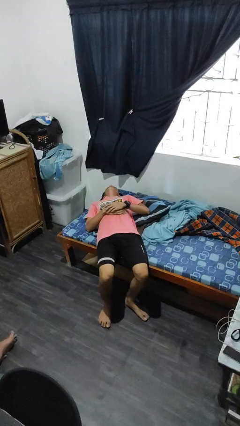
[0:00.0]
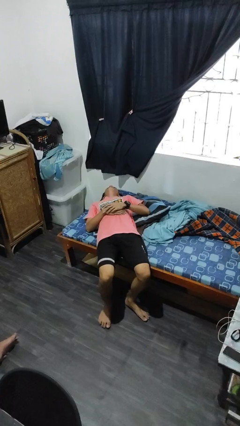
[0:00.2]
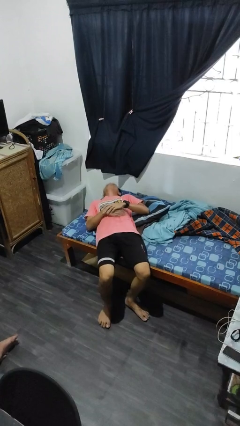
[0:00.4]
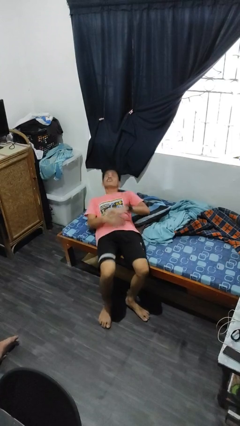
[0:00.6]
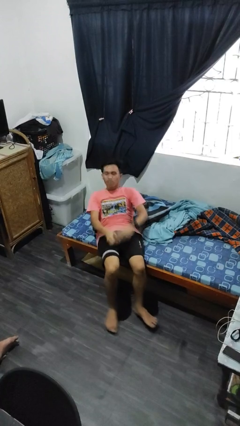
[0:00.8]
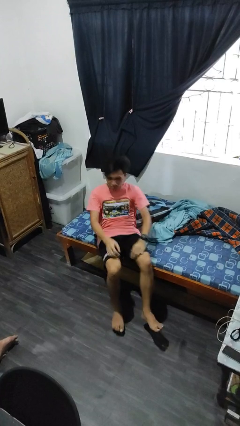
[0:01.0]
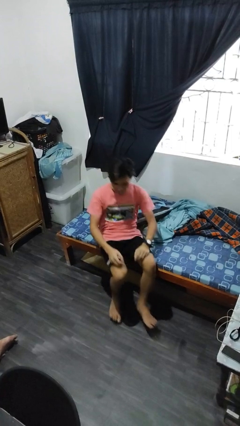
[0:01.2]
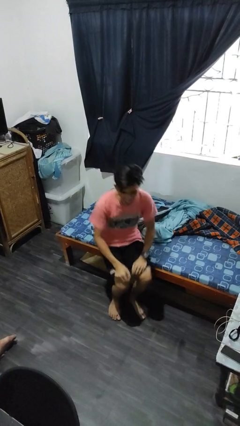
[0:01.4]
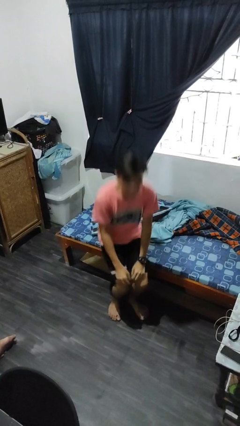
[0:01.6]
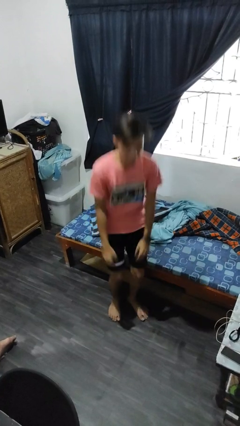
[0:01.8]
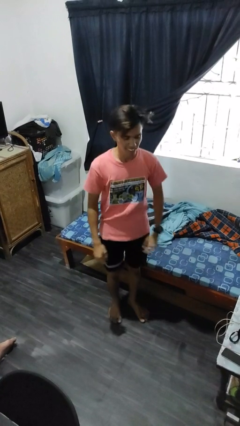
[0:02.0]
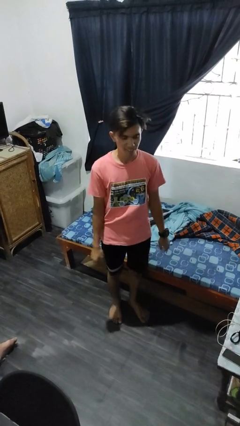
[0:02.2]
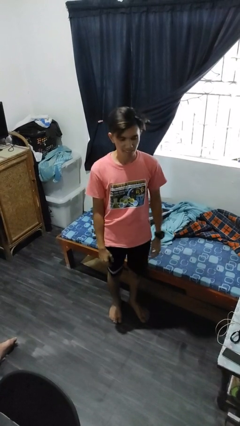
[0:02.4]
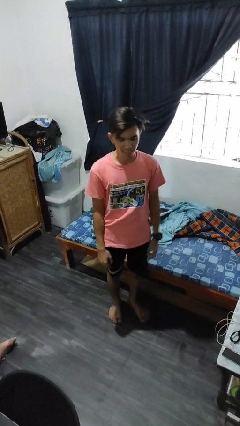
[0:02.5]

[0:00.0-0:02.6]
person stands up

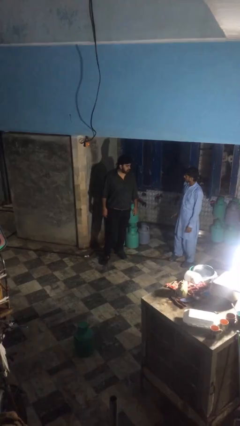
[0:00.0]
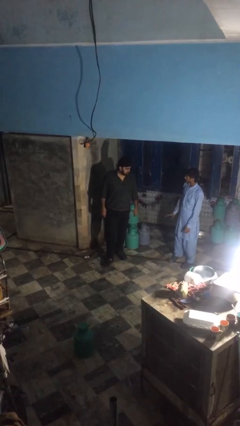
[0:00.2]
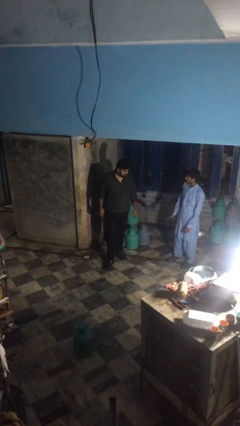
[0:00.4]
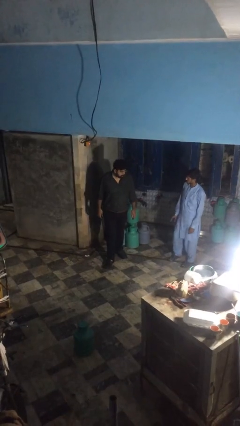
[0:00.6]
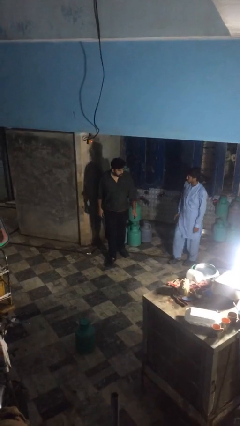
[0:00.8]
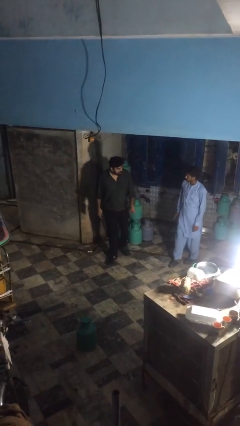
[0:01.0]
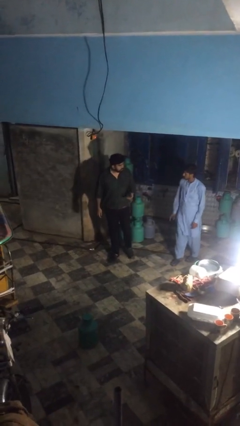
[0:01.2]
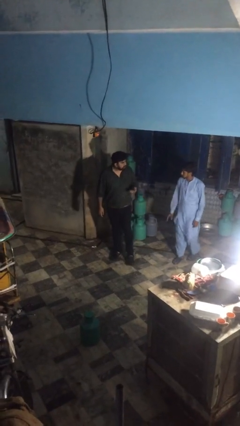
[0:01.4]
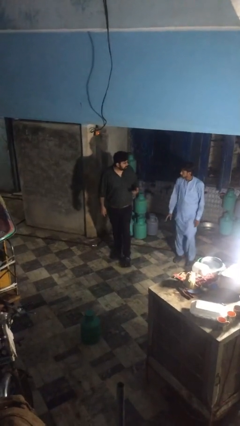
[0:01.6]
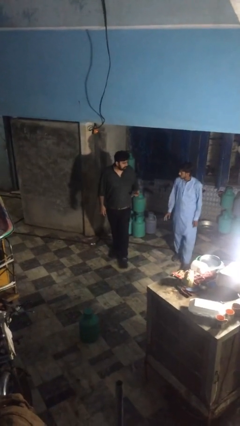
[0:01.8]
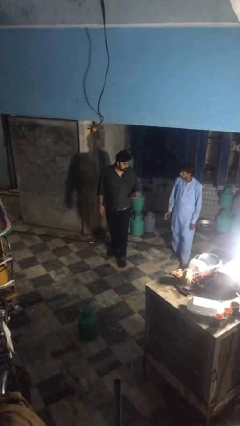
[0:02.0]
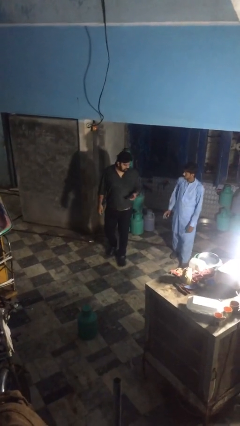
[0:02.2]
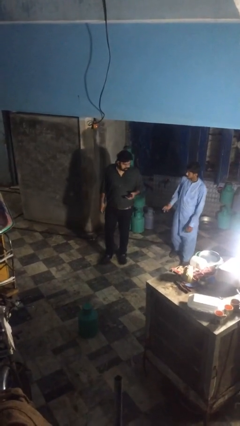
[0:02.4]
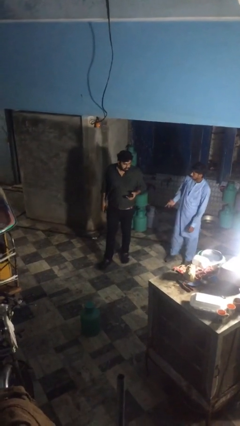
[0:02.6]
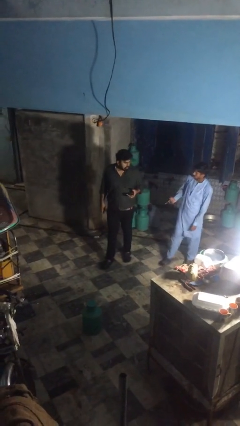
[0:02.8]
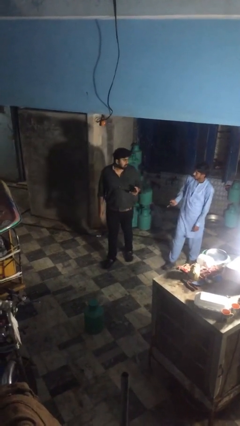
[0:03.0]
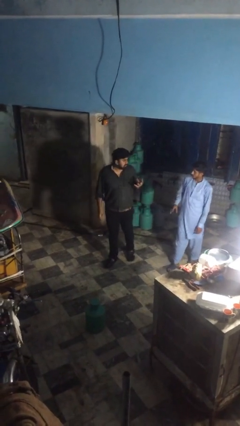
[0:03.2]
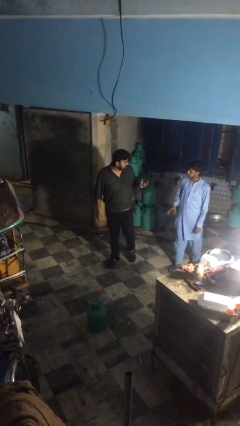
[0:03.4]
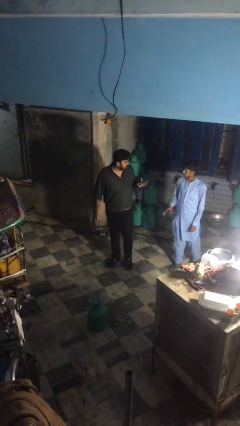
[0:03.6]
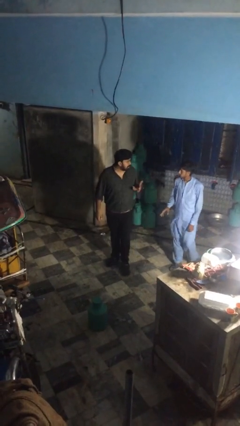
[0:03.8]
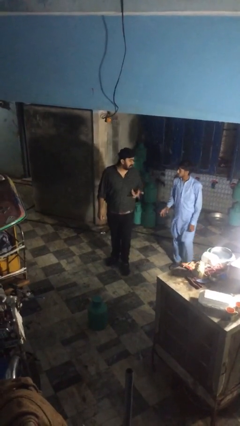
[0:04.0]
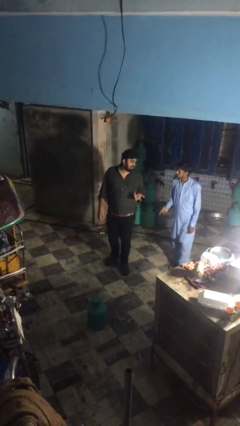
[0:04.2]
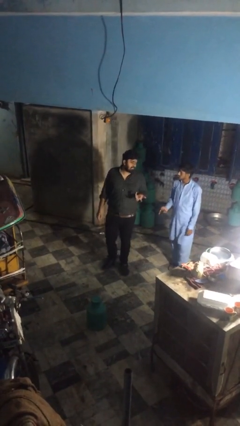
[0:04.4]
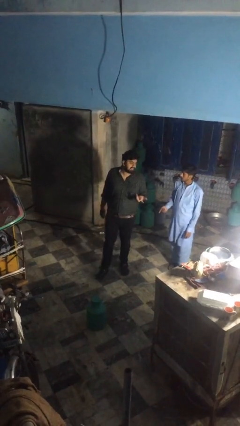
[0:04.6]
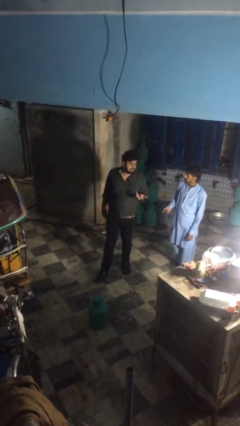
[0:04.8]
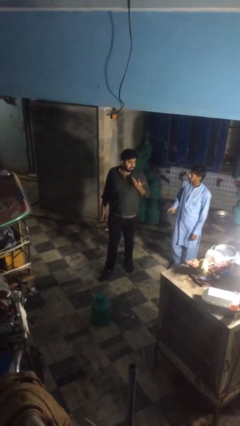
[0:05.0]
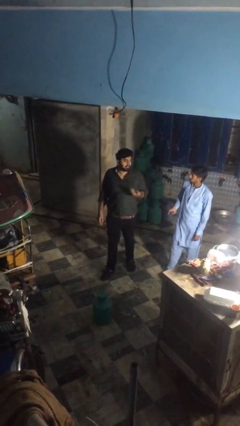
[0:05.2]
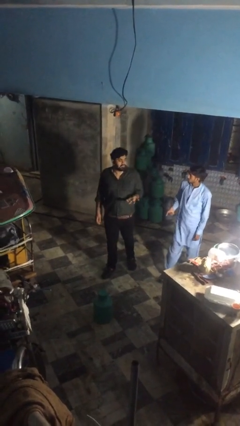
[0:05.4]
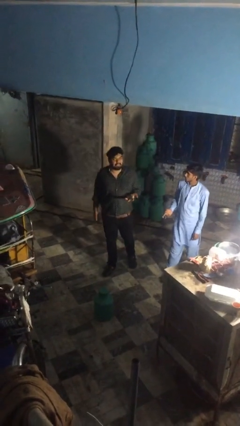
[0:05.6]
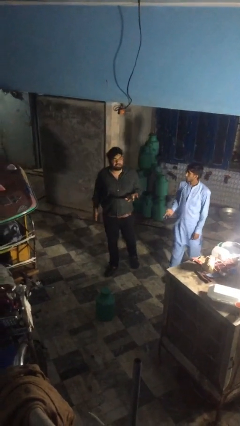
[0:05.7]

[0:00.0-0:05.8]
person talks to person

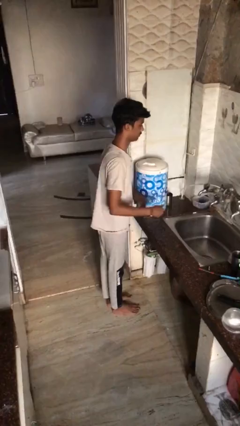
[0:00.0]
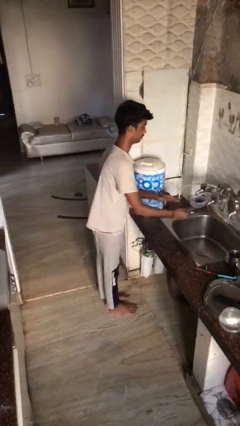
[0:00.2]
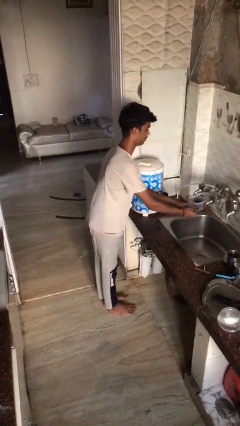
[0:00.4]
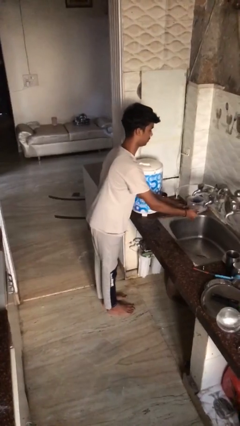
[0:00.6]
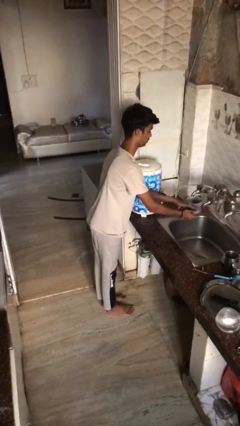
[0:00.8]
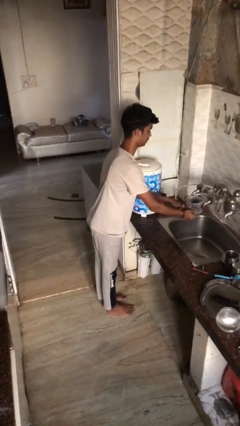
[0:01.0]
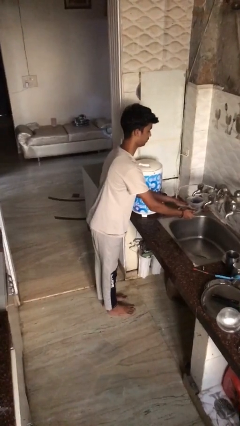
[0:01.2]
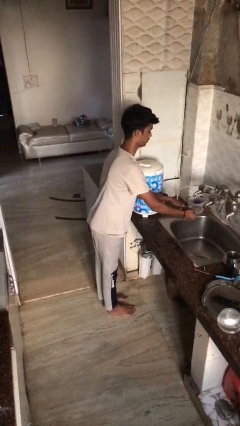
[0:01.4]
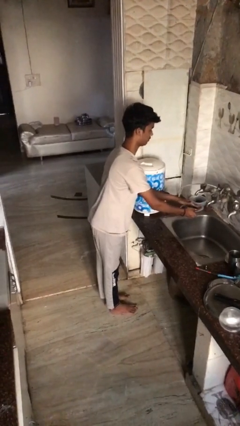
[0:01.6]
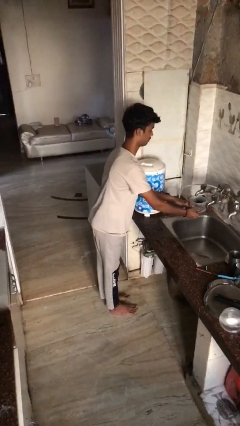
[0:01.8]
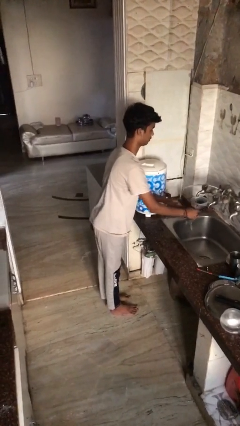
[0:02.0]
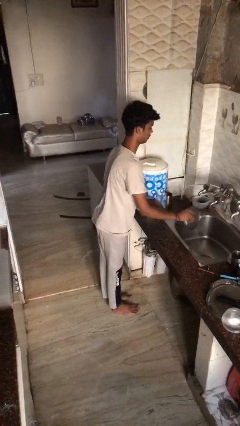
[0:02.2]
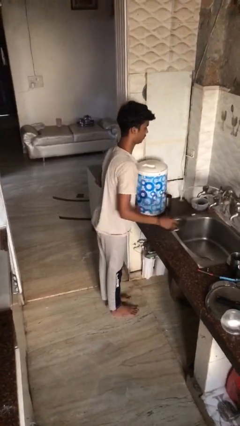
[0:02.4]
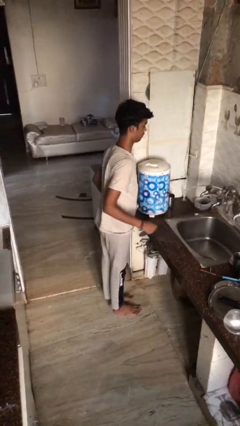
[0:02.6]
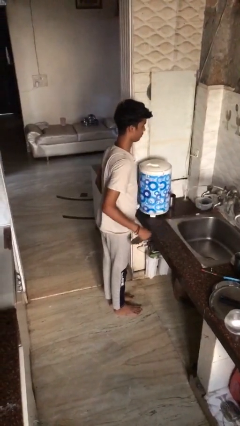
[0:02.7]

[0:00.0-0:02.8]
person washes dish

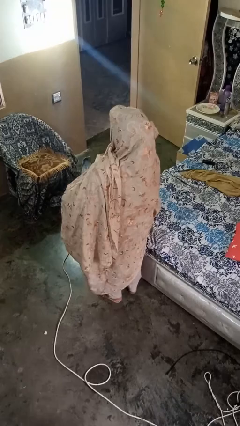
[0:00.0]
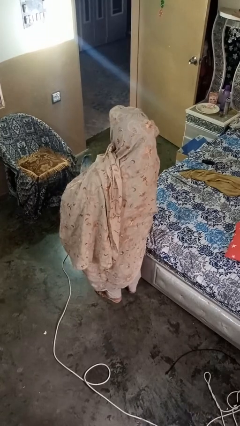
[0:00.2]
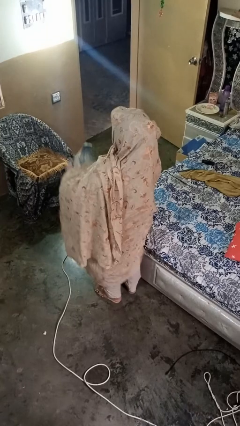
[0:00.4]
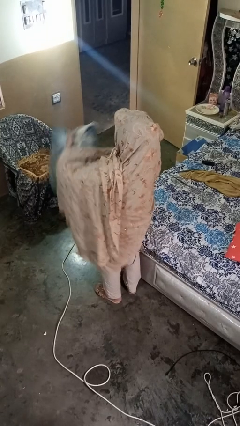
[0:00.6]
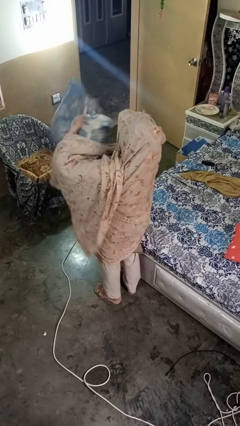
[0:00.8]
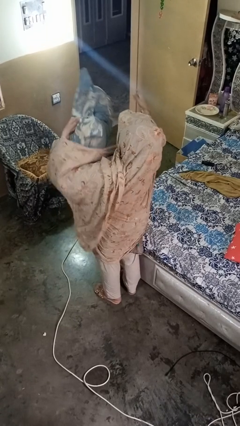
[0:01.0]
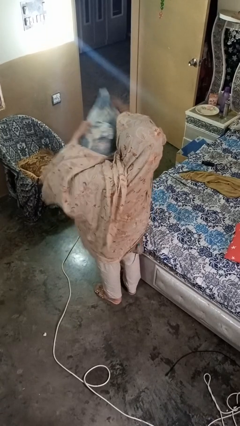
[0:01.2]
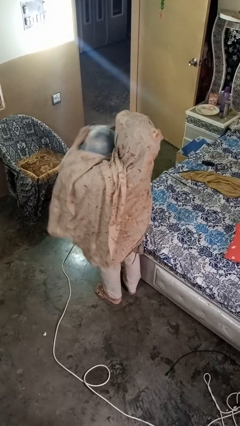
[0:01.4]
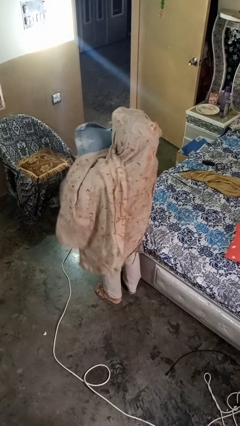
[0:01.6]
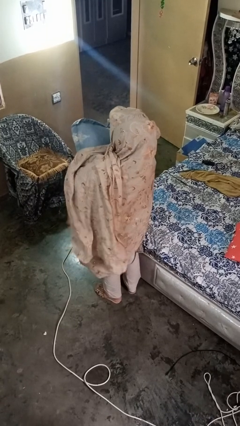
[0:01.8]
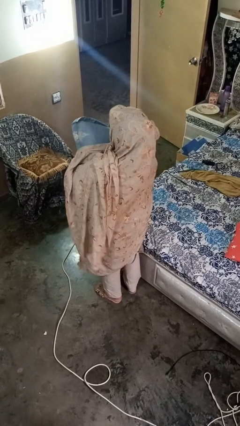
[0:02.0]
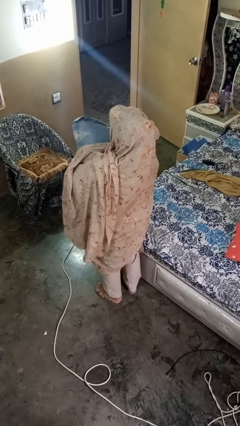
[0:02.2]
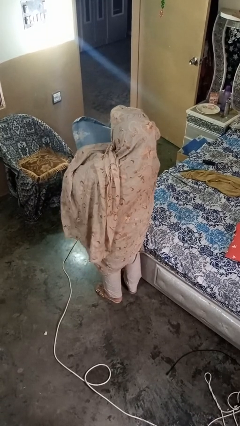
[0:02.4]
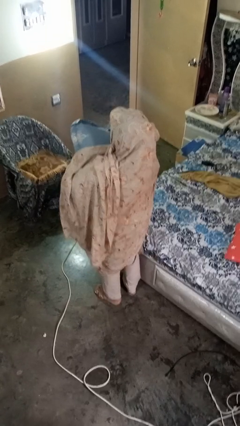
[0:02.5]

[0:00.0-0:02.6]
person squeezes object

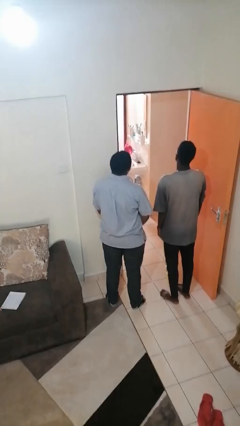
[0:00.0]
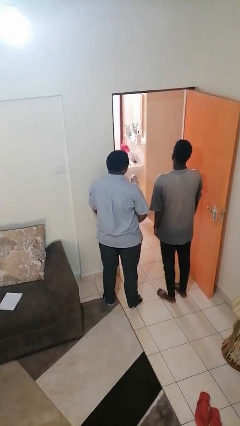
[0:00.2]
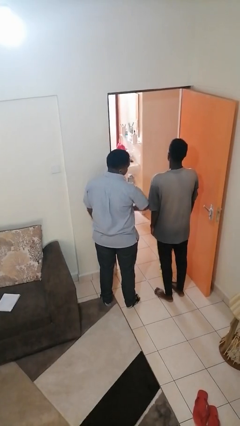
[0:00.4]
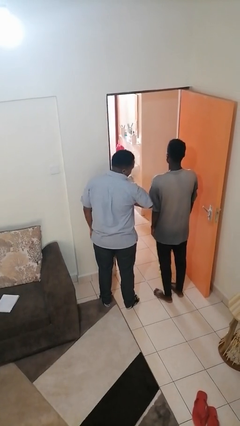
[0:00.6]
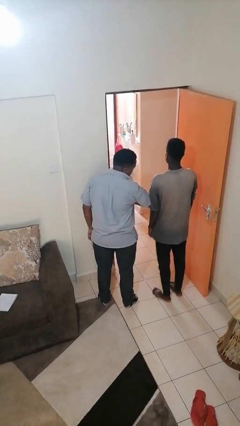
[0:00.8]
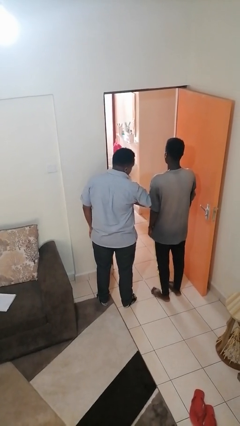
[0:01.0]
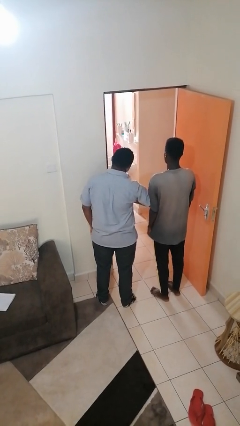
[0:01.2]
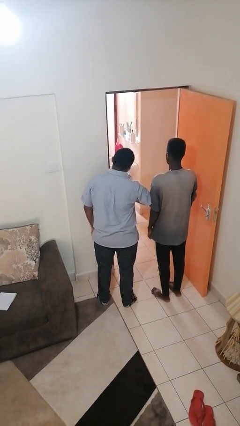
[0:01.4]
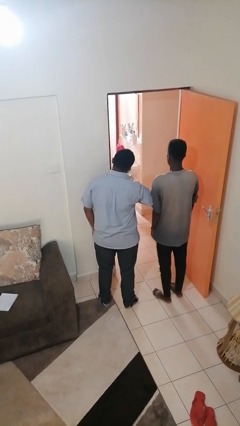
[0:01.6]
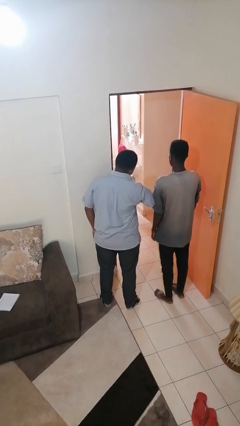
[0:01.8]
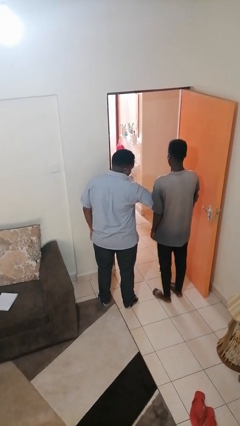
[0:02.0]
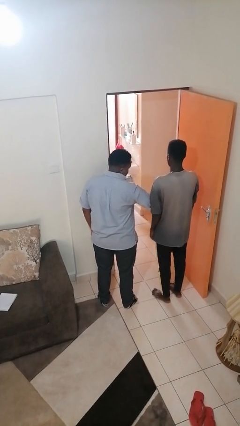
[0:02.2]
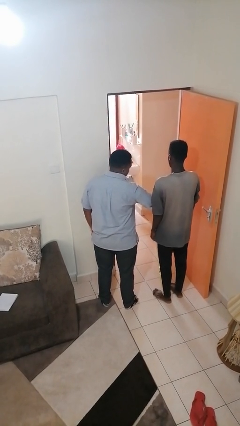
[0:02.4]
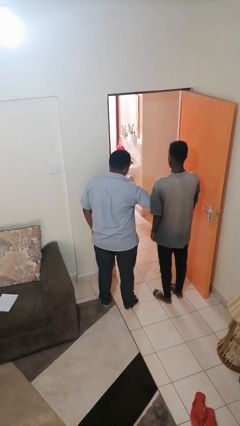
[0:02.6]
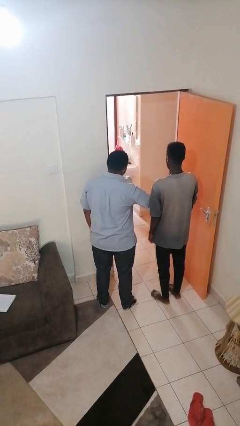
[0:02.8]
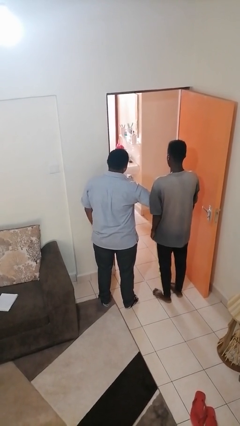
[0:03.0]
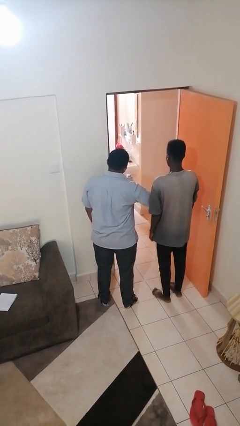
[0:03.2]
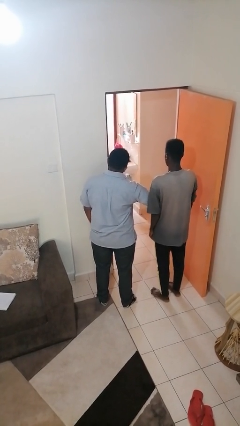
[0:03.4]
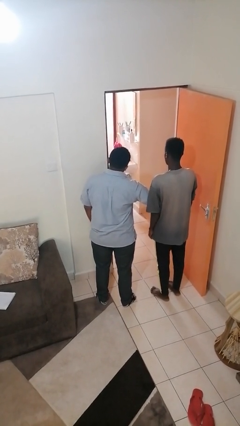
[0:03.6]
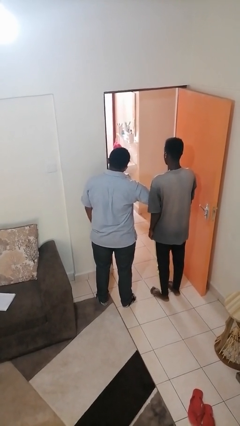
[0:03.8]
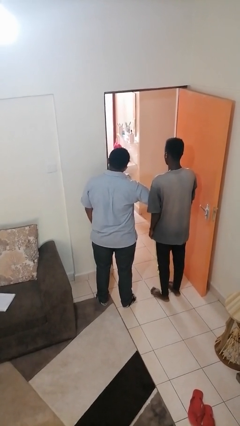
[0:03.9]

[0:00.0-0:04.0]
person nudges person with elbow
